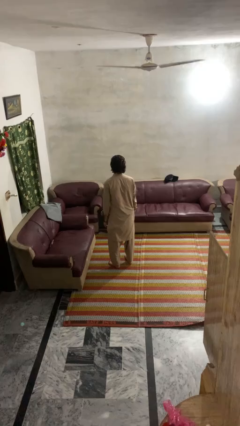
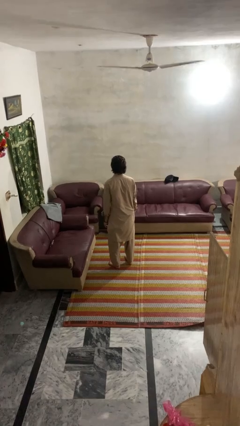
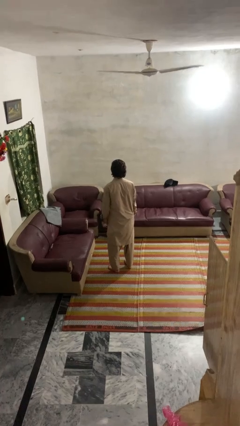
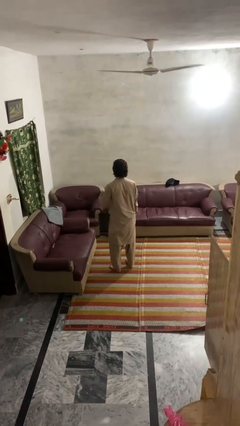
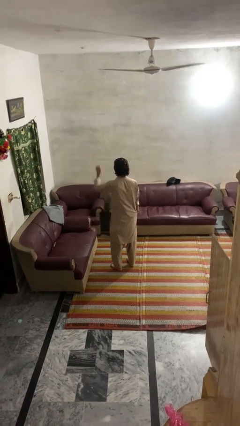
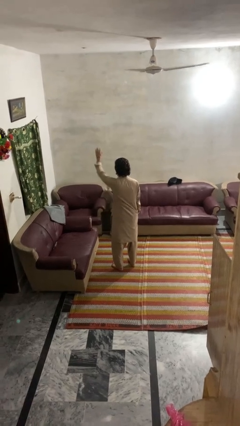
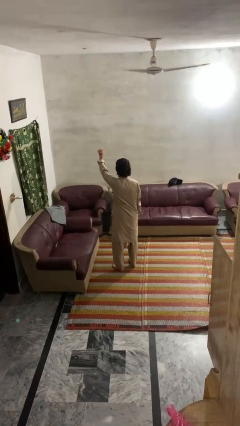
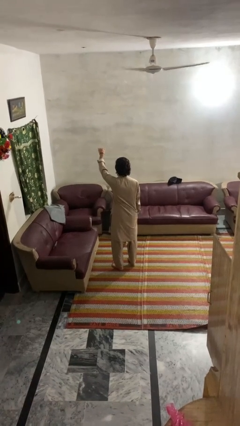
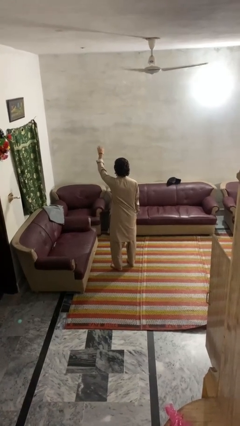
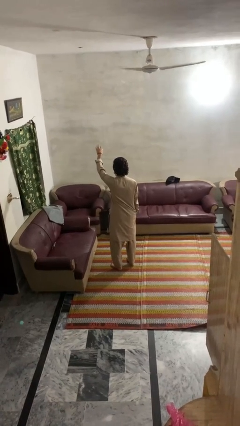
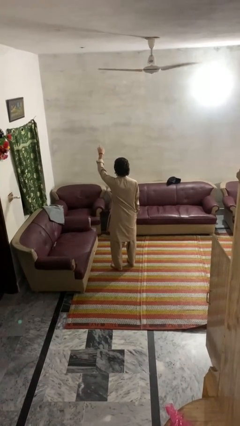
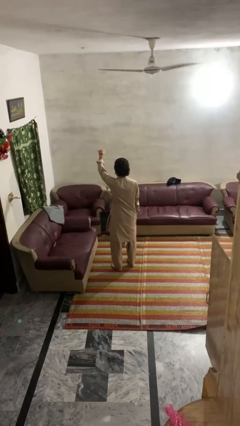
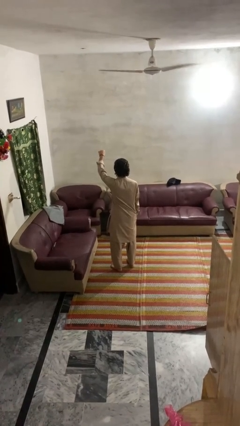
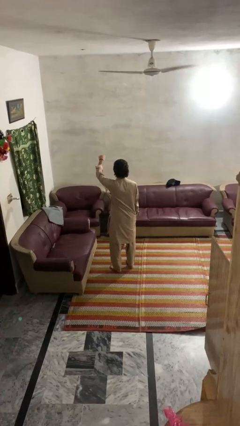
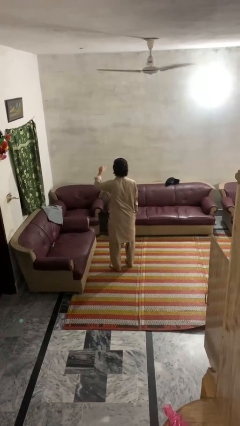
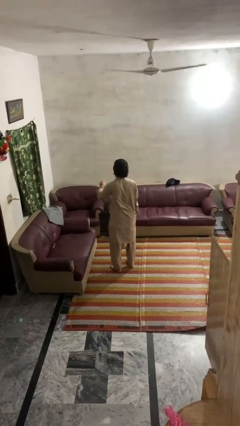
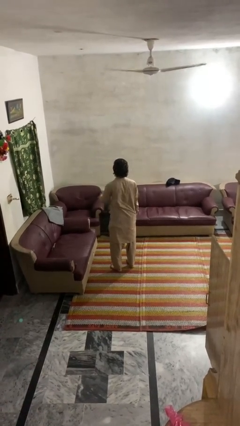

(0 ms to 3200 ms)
person gestures come here

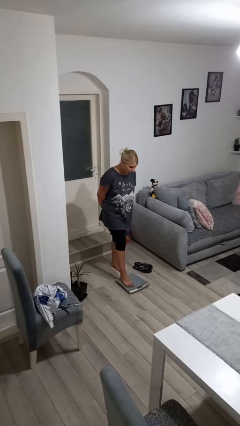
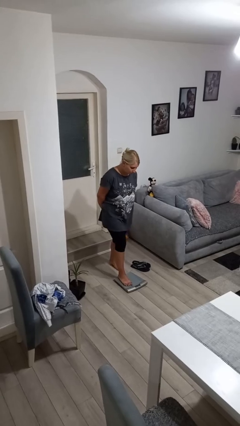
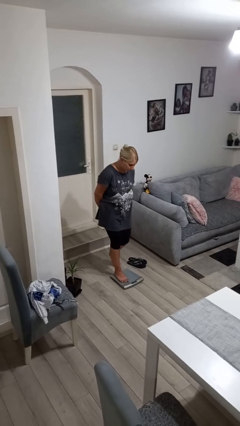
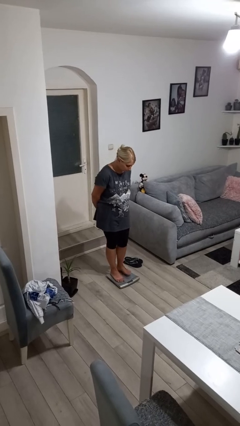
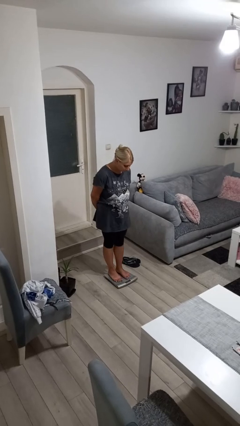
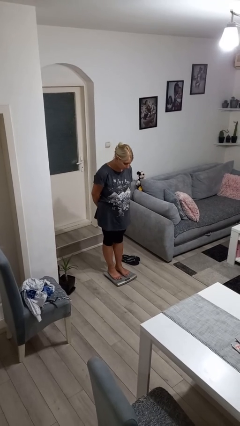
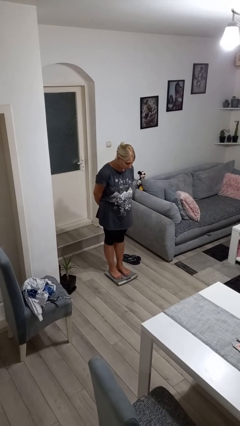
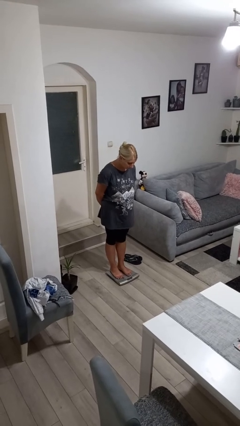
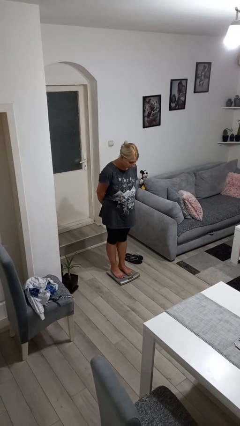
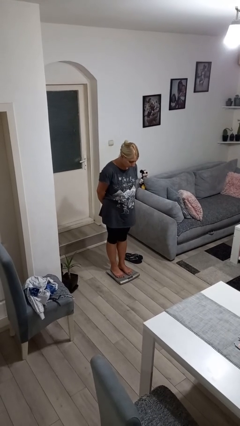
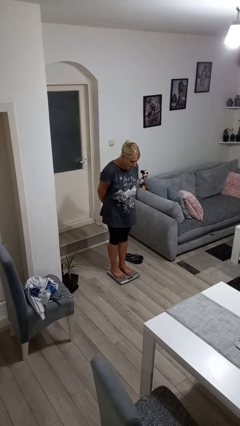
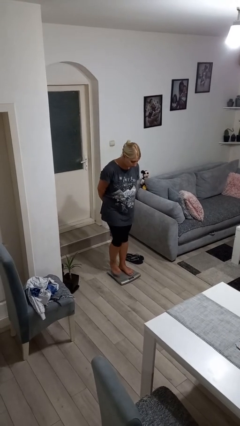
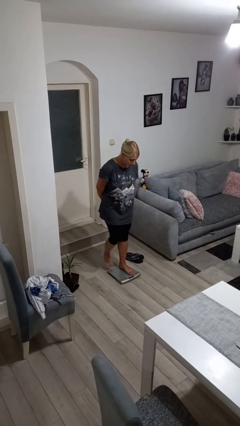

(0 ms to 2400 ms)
person uses bodyweight scale

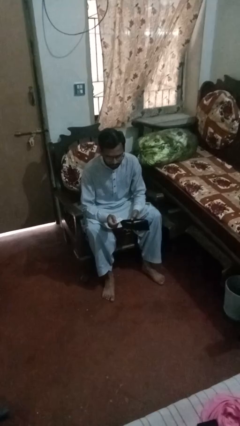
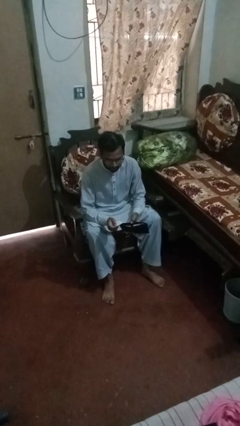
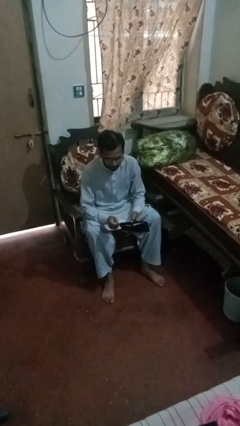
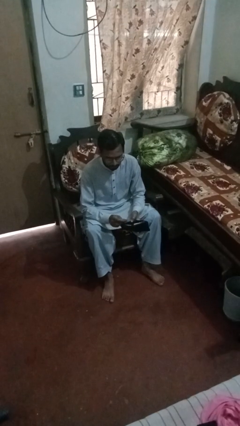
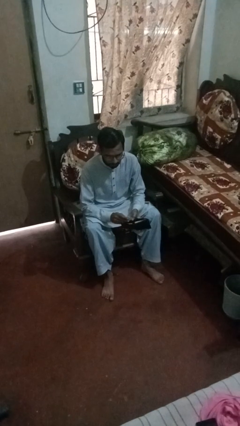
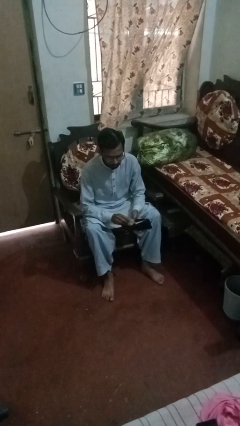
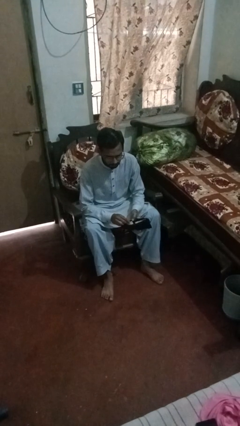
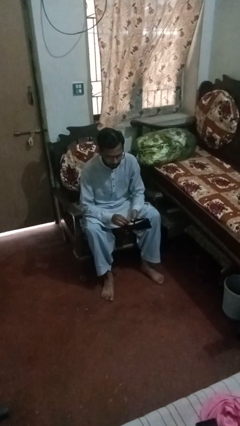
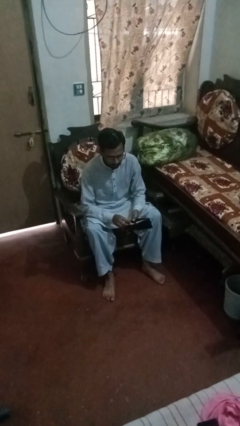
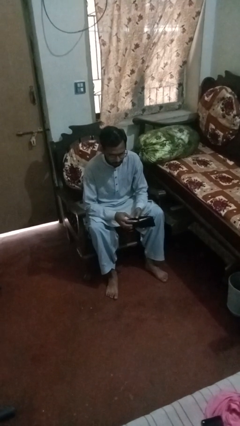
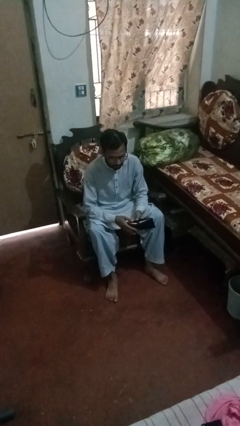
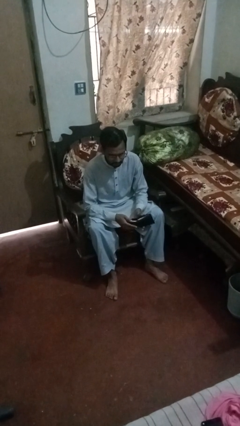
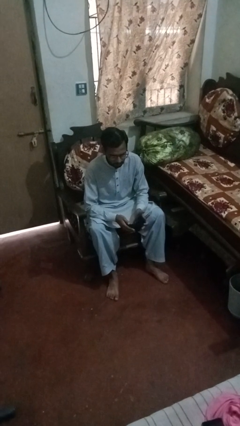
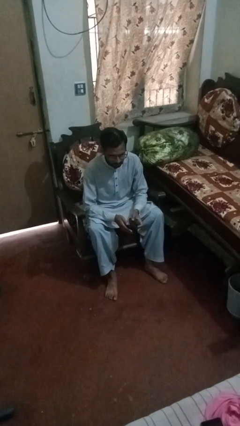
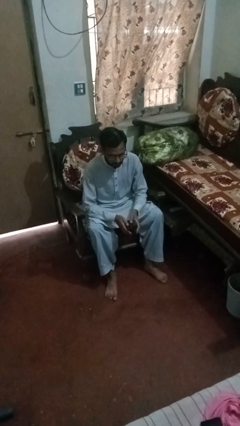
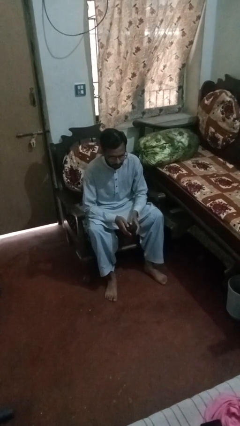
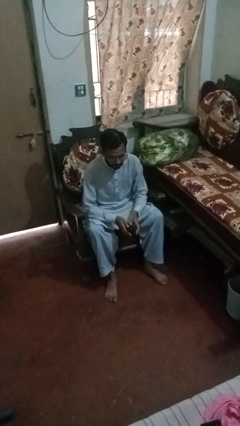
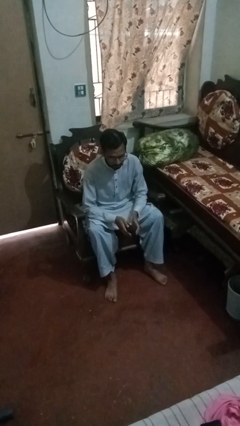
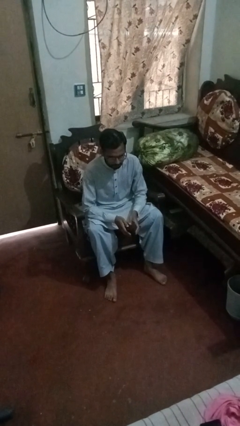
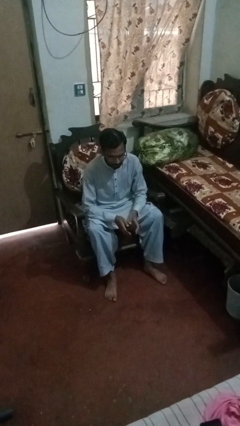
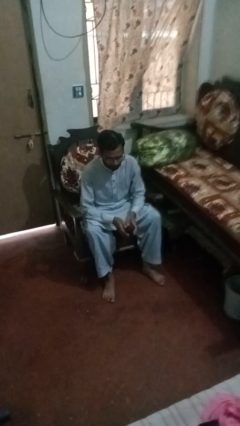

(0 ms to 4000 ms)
person puts object into purse

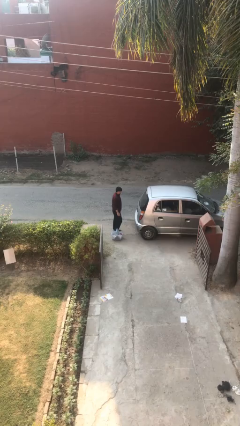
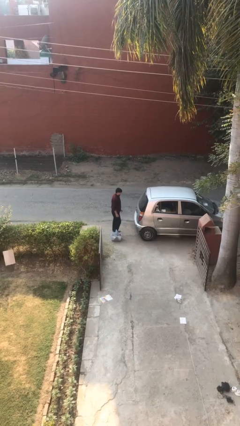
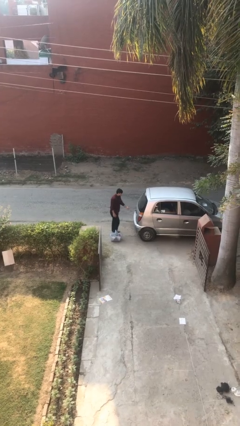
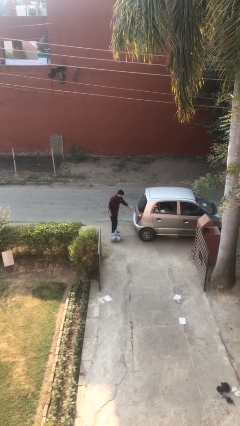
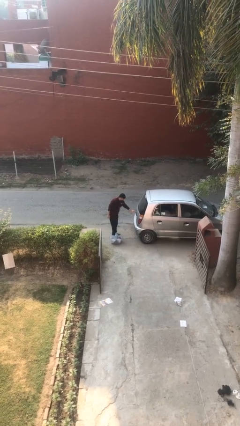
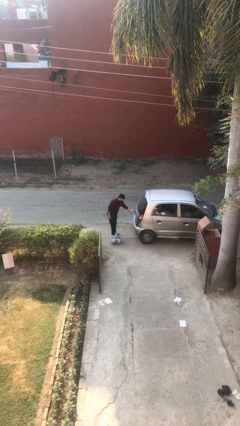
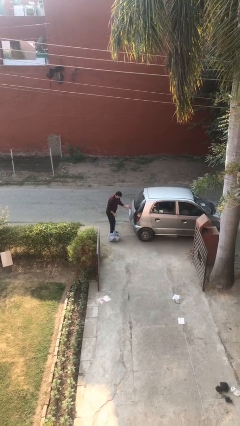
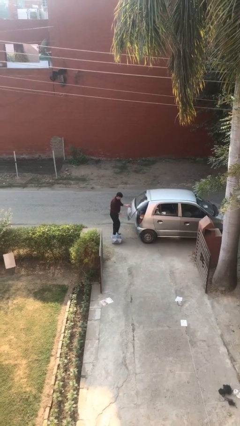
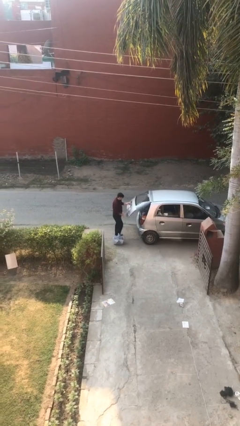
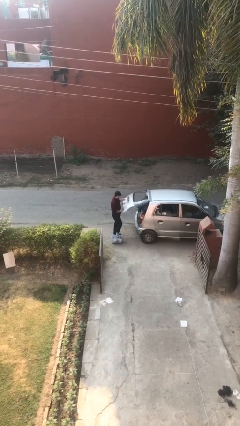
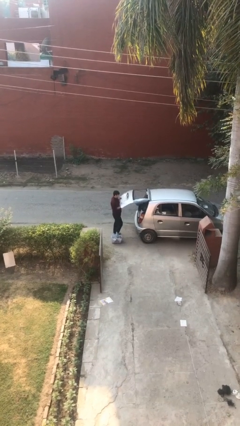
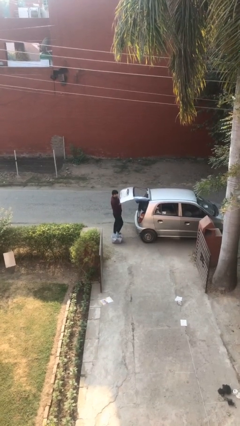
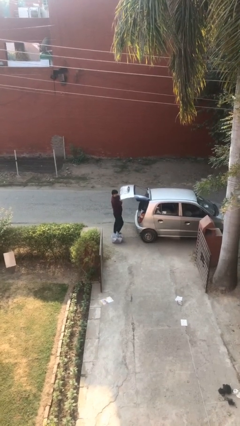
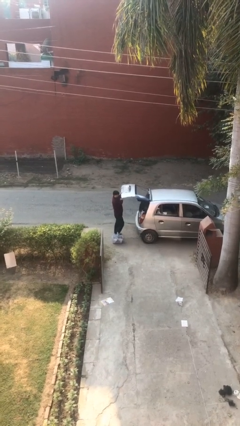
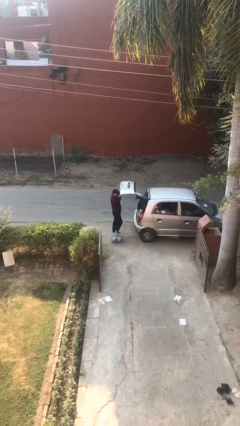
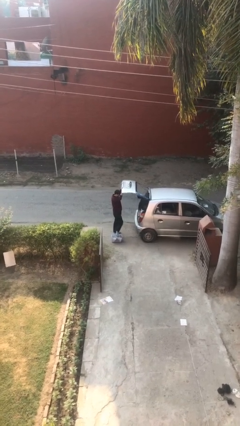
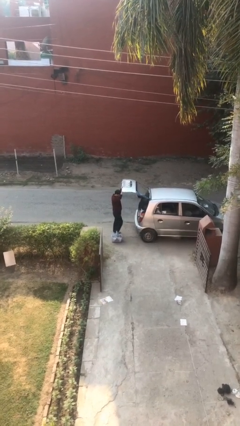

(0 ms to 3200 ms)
person opens car trunk

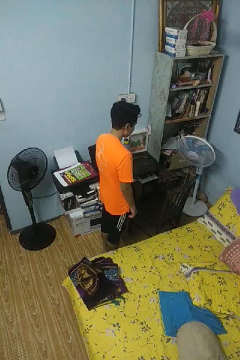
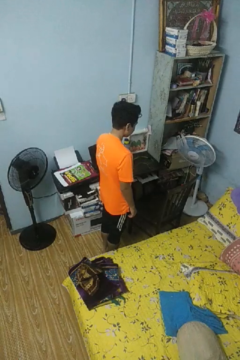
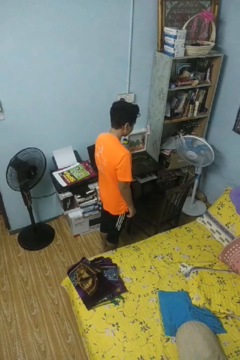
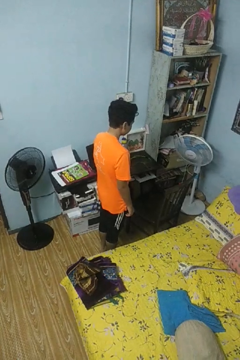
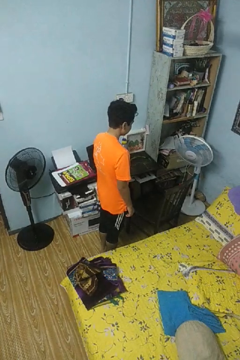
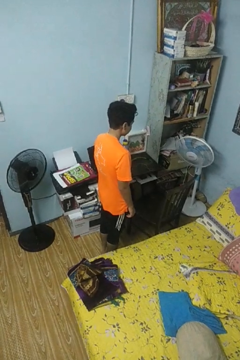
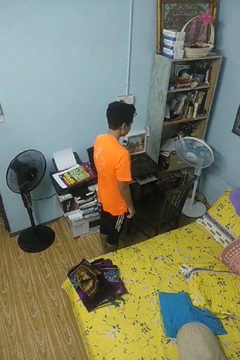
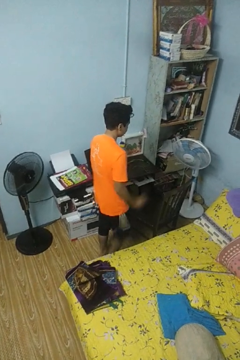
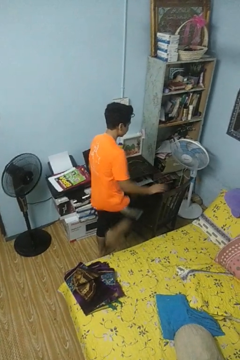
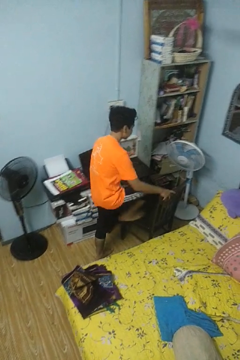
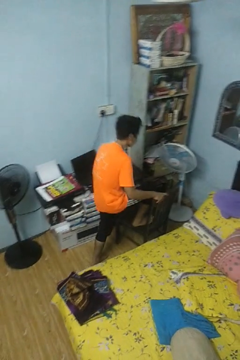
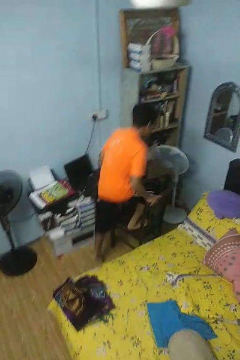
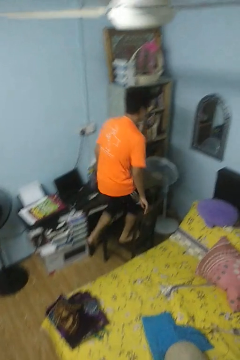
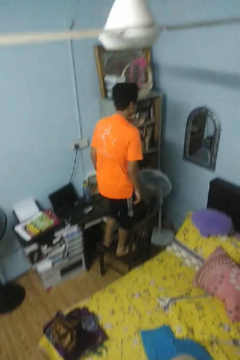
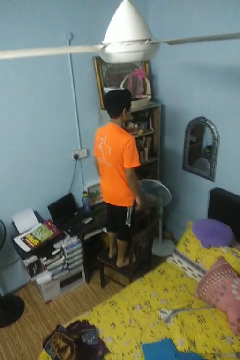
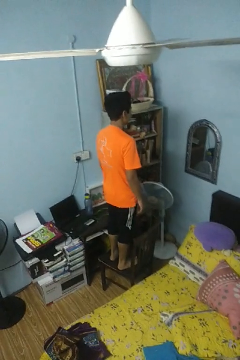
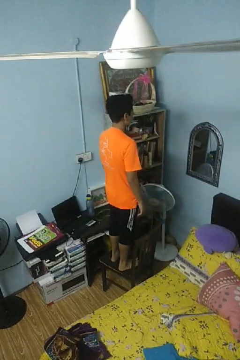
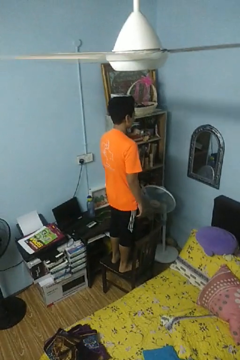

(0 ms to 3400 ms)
person climbs on chair

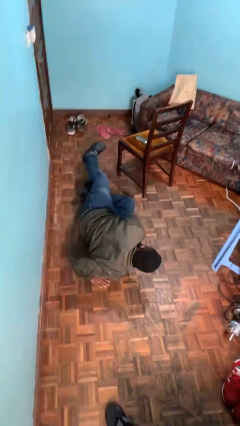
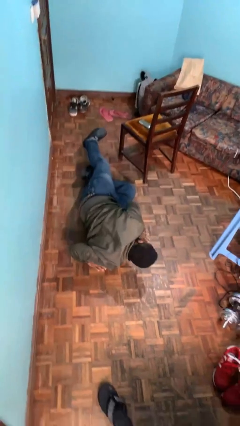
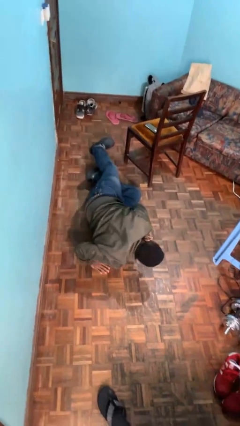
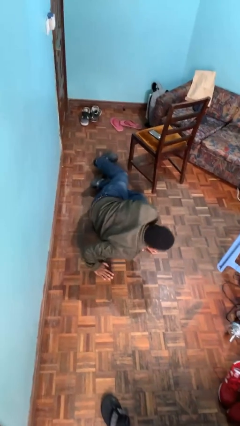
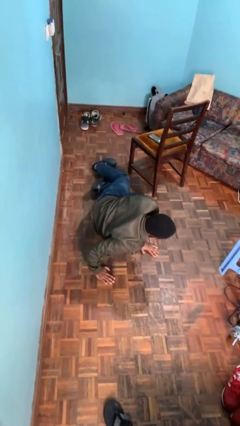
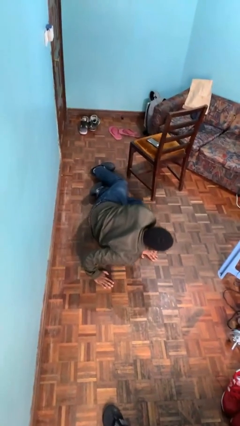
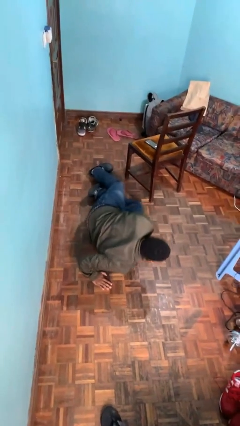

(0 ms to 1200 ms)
person lies down on floor

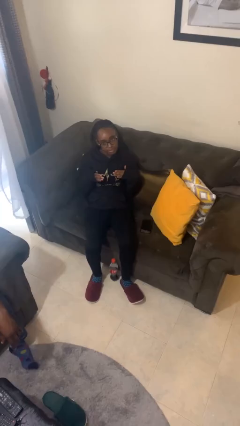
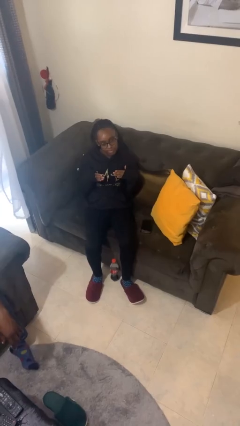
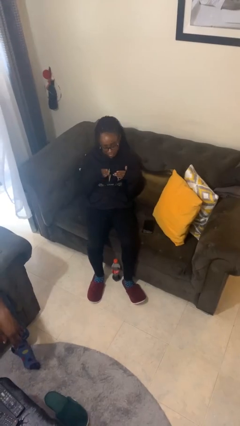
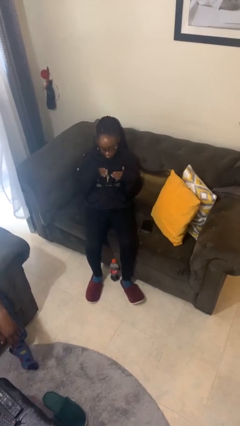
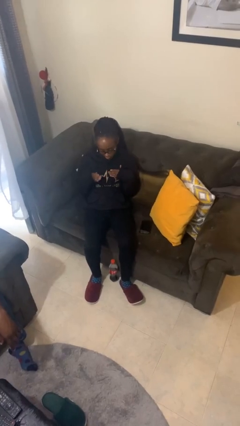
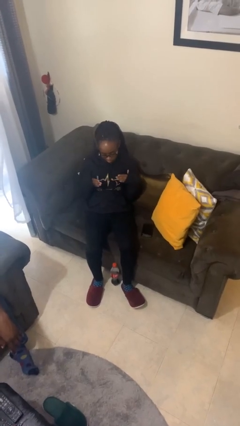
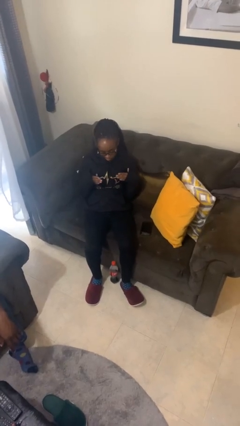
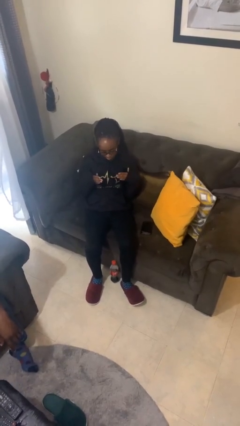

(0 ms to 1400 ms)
person drums on chest
